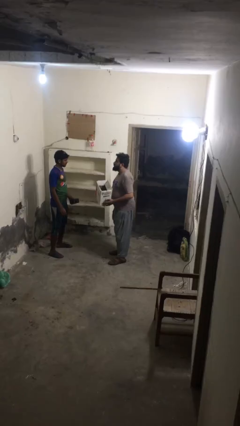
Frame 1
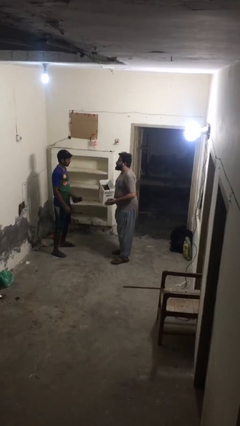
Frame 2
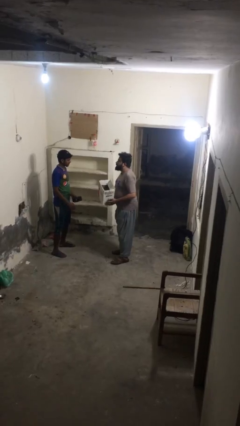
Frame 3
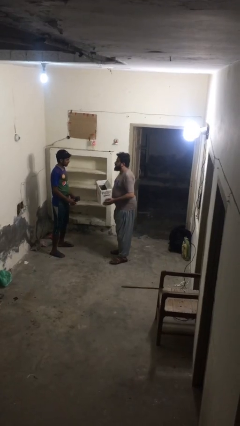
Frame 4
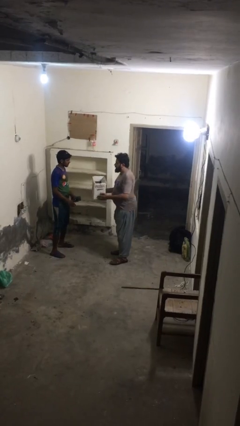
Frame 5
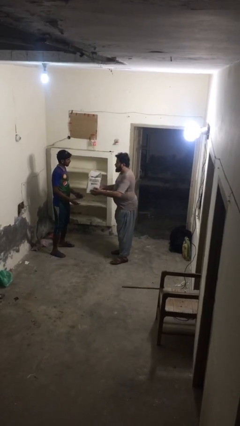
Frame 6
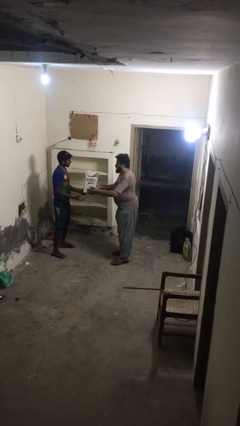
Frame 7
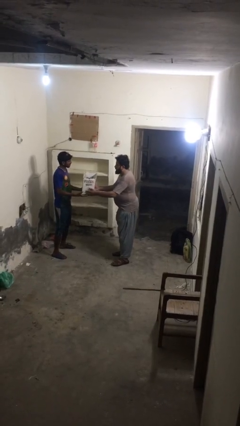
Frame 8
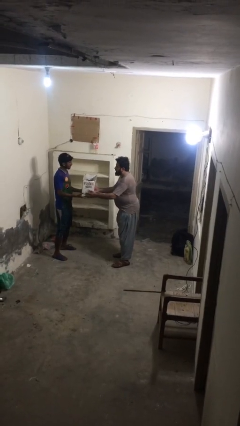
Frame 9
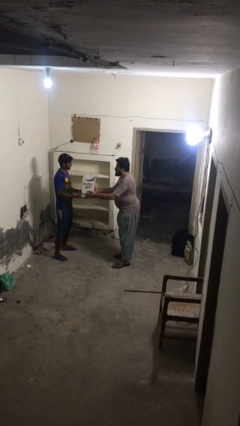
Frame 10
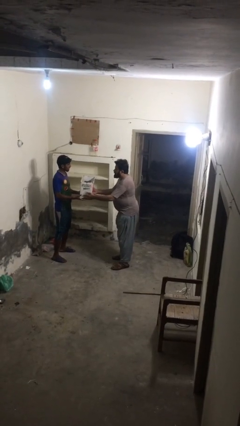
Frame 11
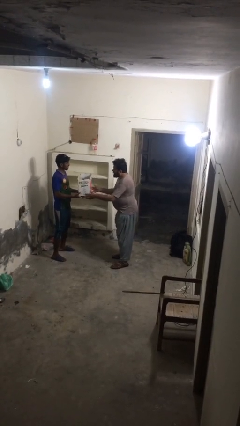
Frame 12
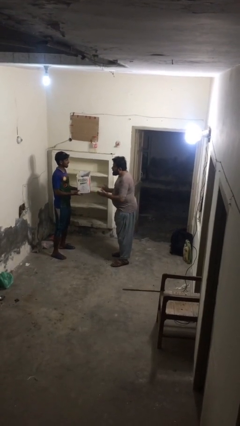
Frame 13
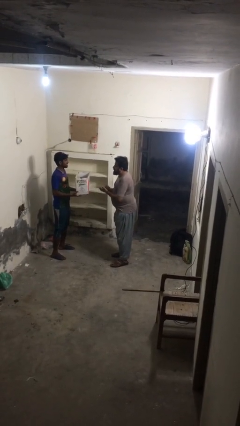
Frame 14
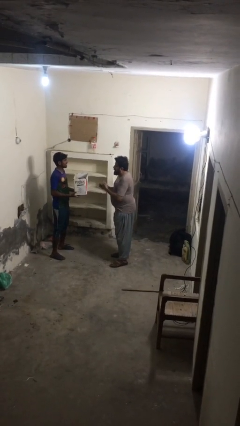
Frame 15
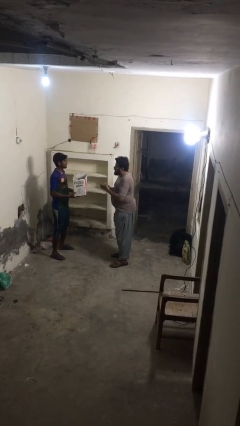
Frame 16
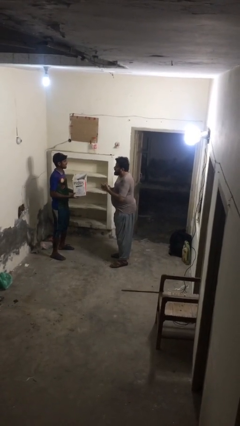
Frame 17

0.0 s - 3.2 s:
person transfers object to person

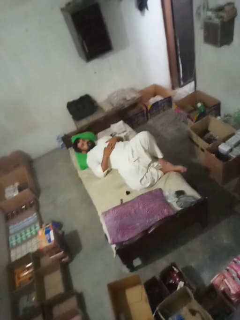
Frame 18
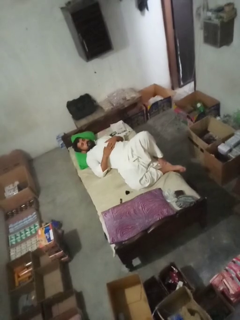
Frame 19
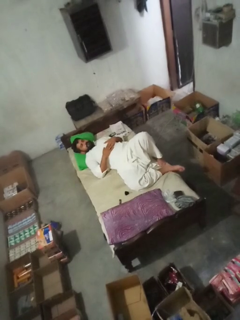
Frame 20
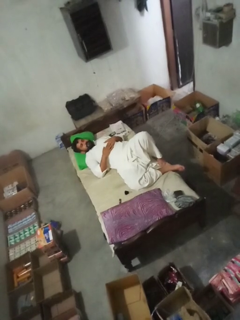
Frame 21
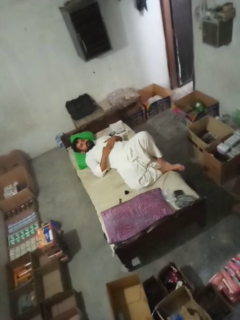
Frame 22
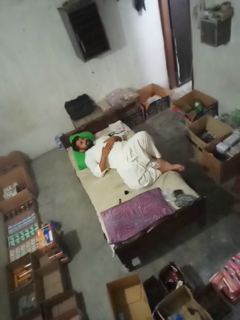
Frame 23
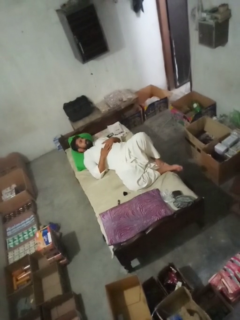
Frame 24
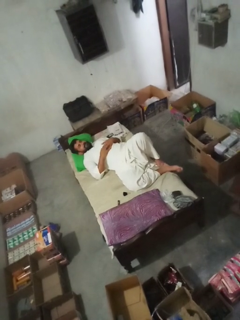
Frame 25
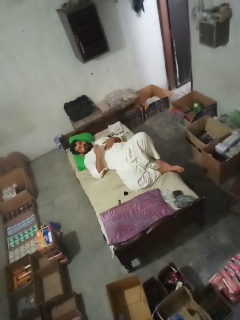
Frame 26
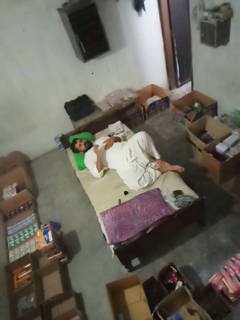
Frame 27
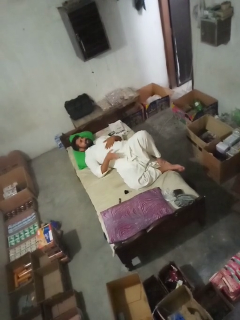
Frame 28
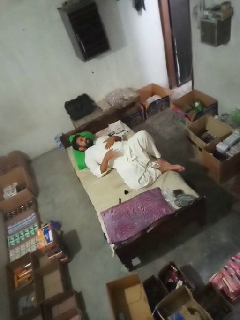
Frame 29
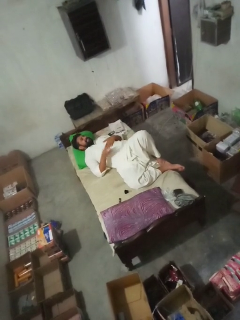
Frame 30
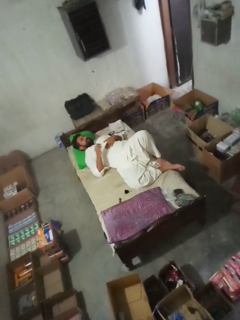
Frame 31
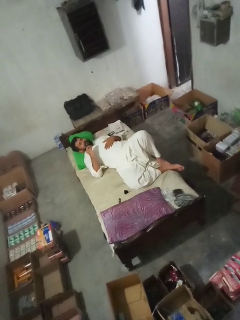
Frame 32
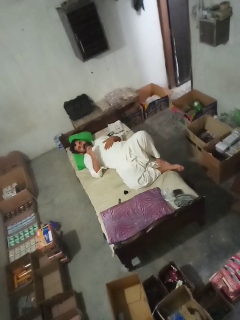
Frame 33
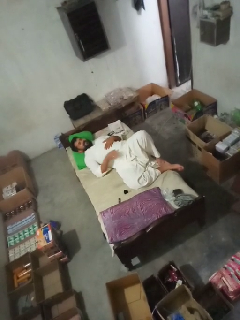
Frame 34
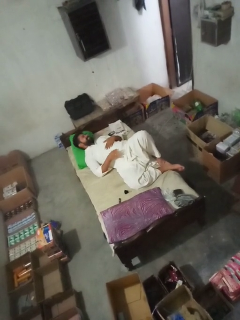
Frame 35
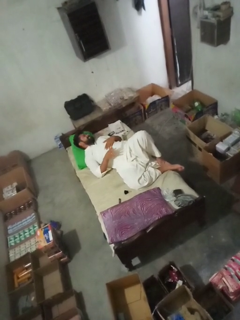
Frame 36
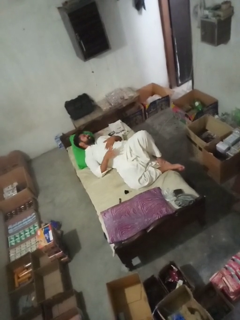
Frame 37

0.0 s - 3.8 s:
person nods head

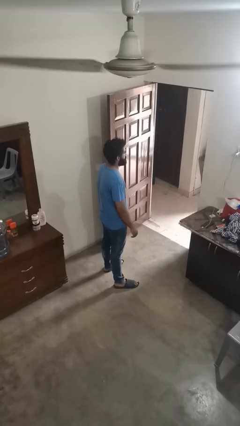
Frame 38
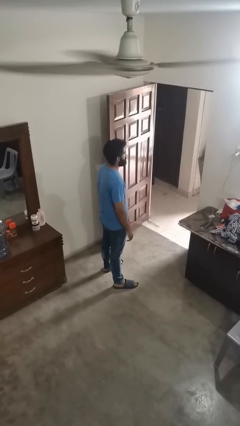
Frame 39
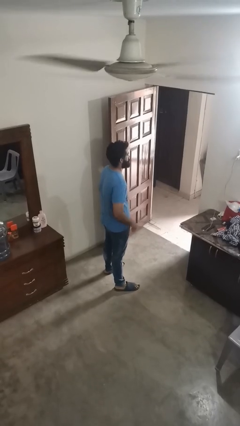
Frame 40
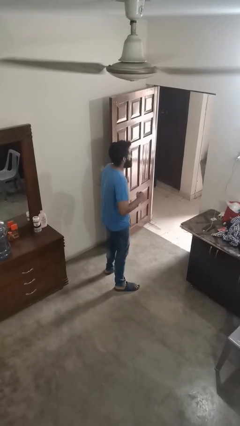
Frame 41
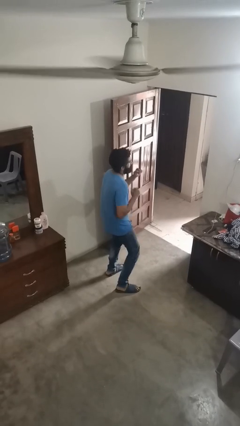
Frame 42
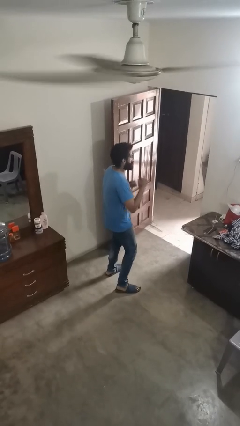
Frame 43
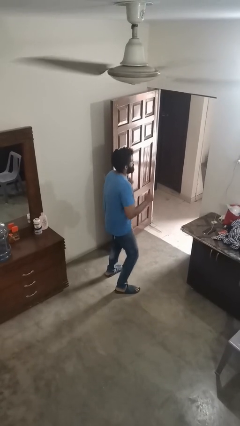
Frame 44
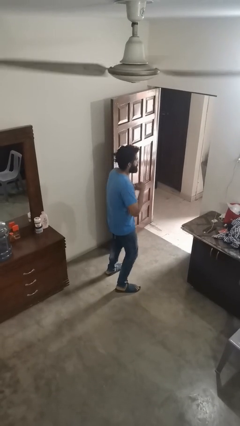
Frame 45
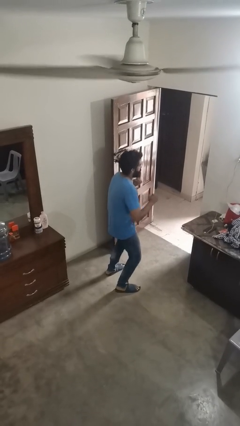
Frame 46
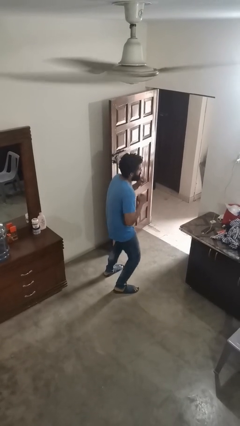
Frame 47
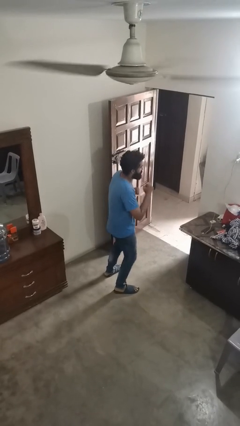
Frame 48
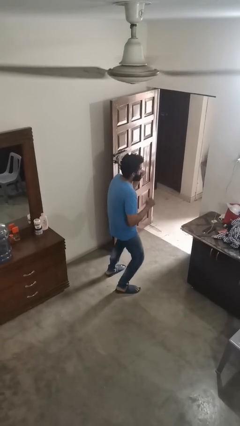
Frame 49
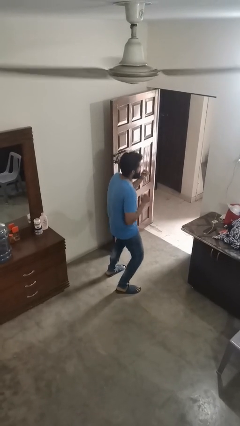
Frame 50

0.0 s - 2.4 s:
person dances in place

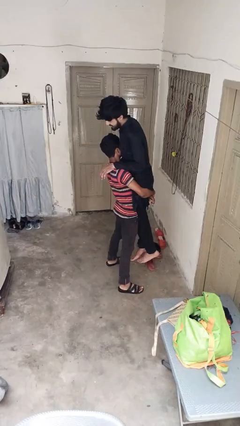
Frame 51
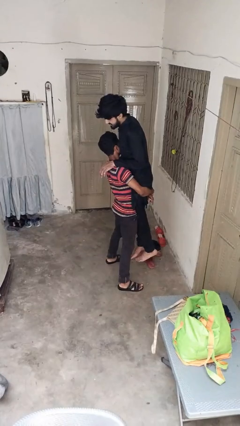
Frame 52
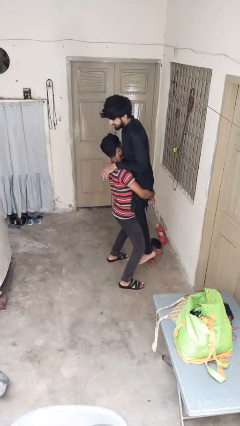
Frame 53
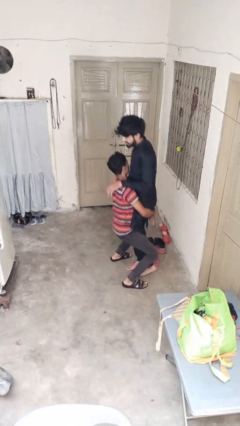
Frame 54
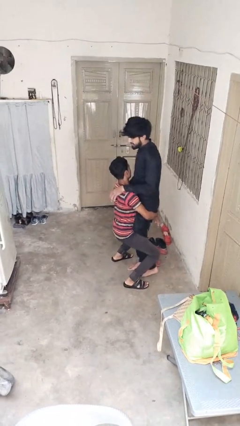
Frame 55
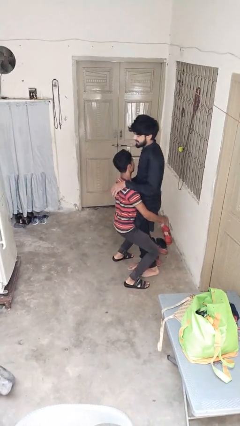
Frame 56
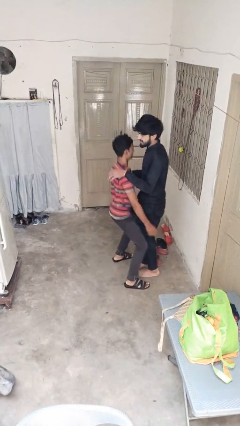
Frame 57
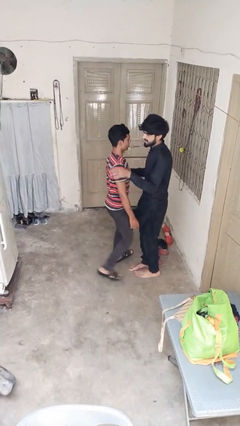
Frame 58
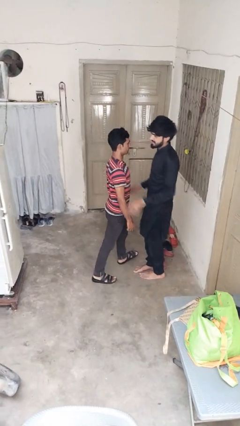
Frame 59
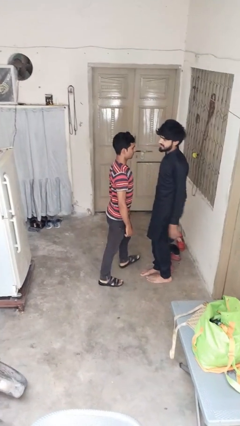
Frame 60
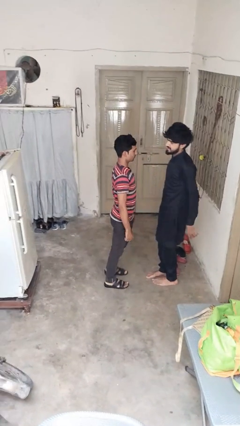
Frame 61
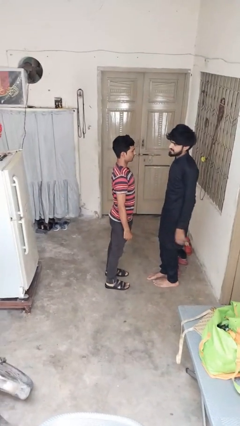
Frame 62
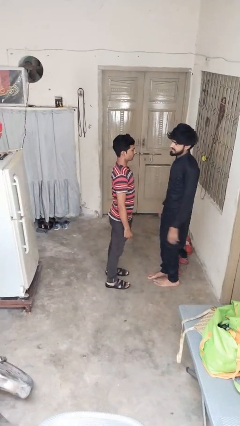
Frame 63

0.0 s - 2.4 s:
person puts down person

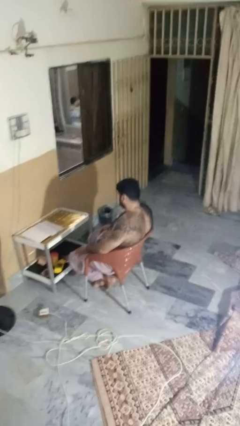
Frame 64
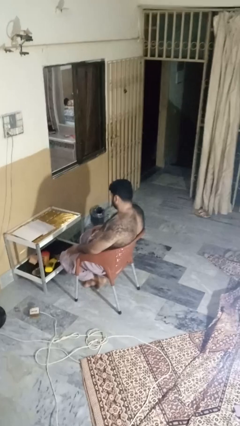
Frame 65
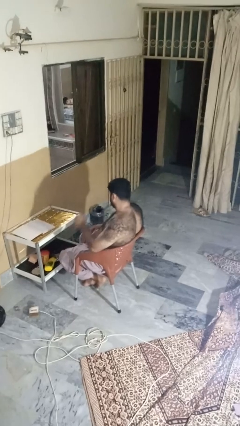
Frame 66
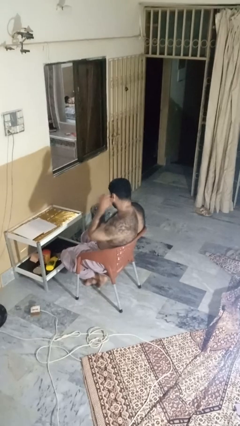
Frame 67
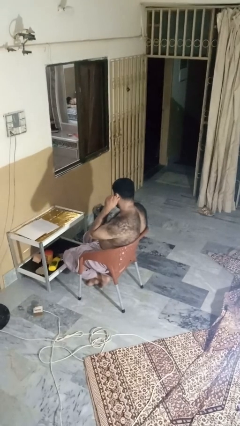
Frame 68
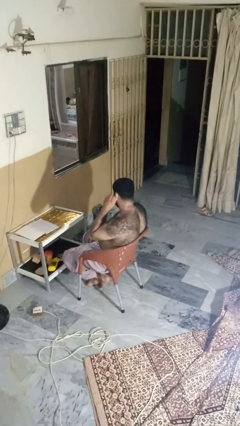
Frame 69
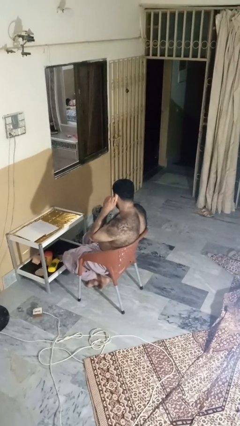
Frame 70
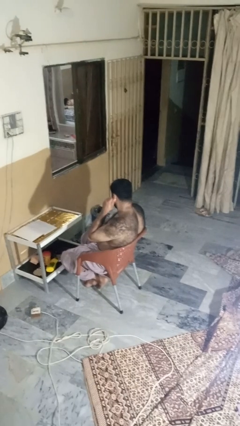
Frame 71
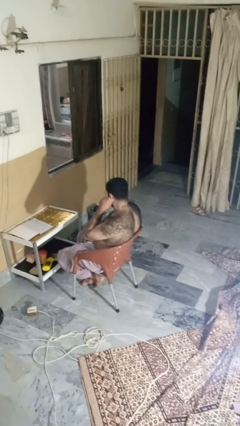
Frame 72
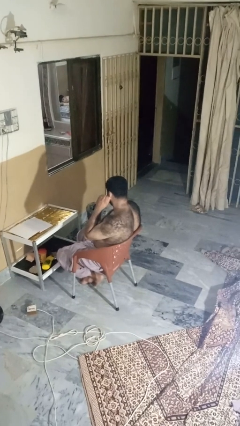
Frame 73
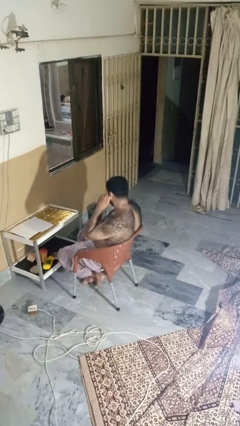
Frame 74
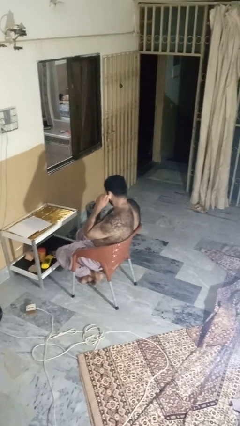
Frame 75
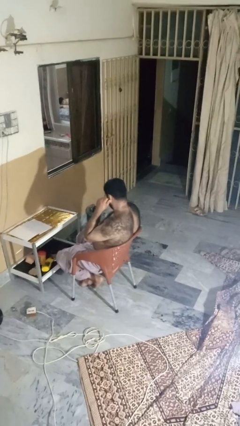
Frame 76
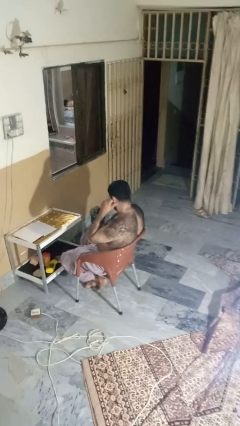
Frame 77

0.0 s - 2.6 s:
person touches earlobe

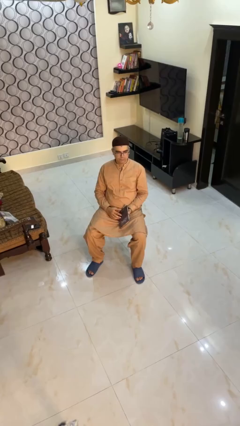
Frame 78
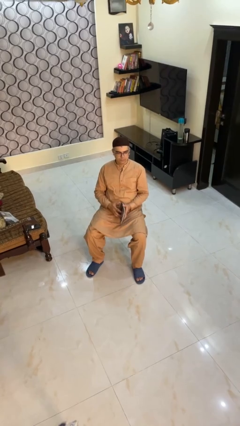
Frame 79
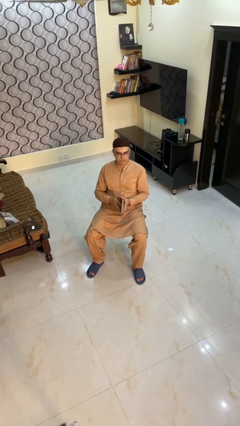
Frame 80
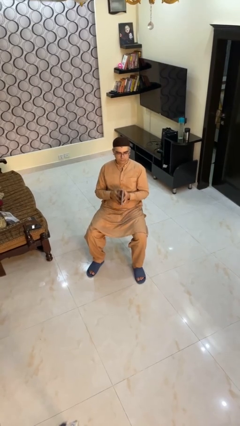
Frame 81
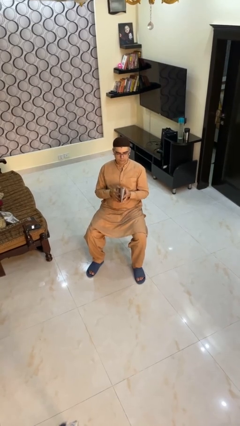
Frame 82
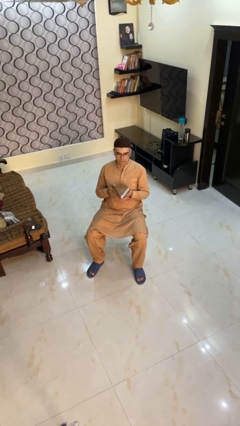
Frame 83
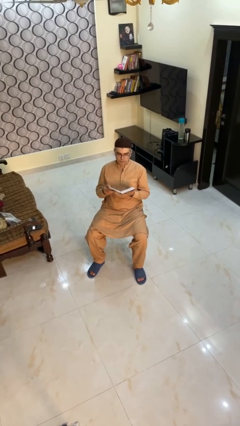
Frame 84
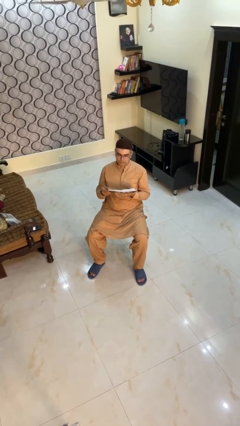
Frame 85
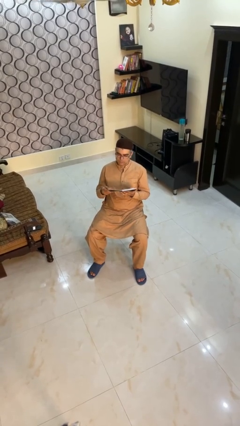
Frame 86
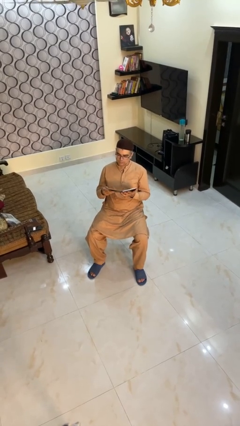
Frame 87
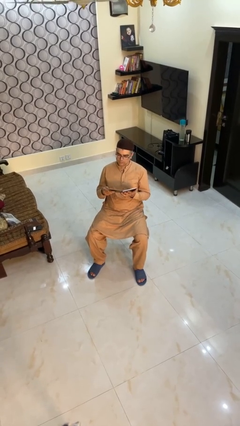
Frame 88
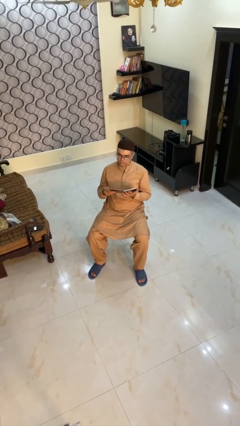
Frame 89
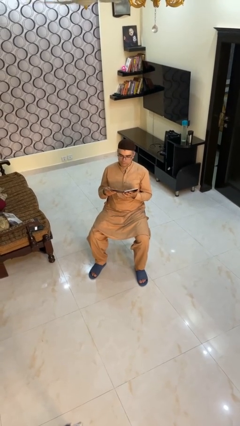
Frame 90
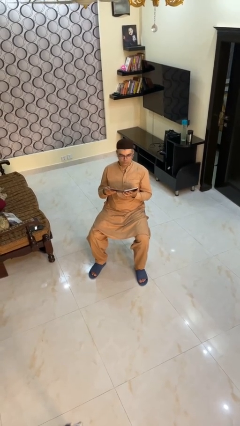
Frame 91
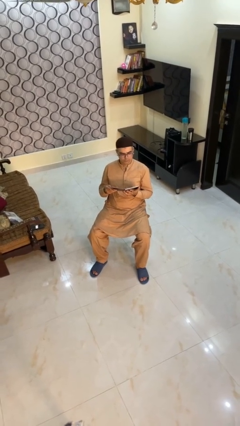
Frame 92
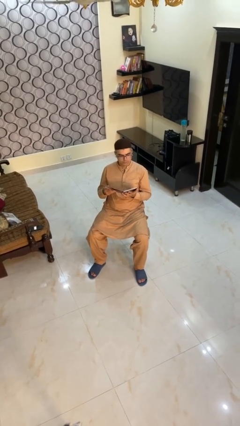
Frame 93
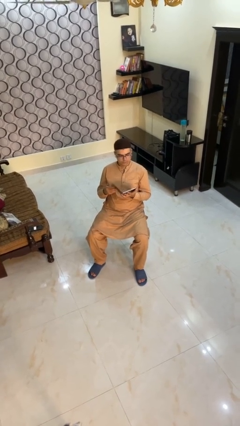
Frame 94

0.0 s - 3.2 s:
person reads book

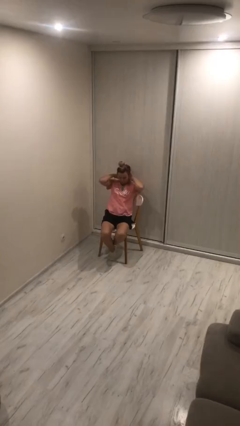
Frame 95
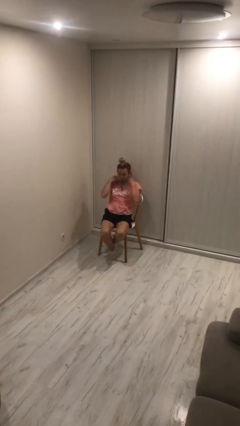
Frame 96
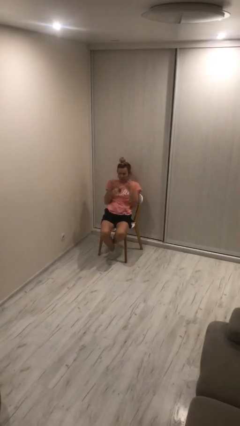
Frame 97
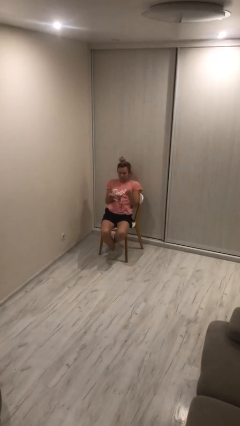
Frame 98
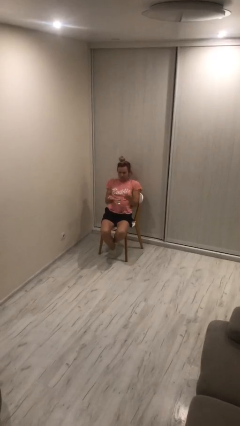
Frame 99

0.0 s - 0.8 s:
person takes off necklace
